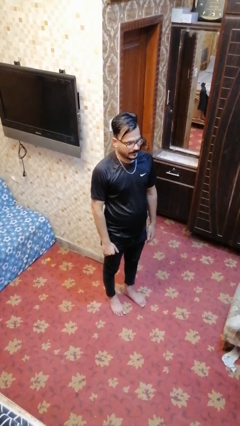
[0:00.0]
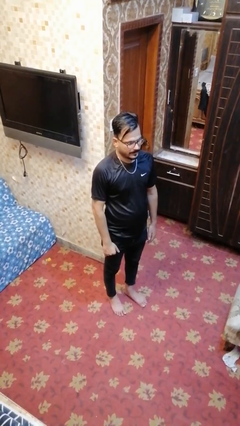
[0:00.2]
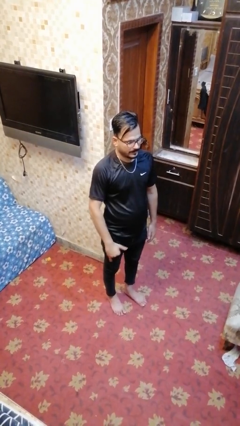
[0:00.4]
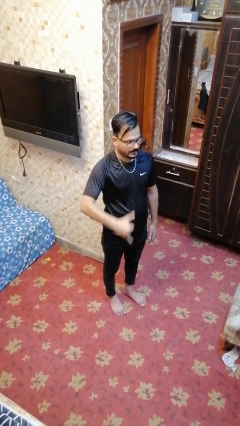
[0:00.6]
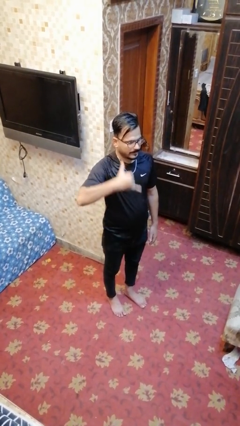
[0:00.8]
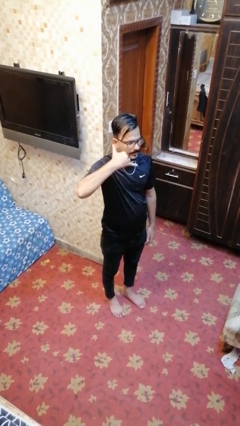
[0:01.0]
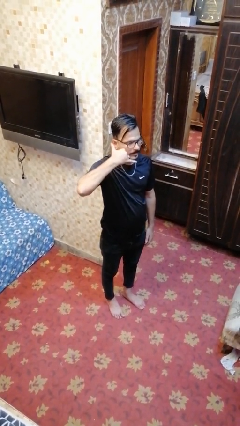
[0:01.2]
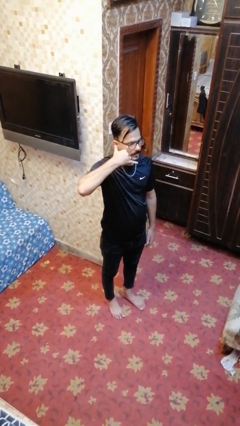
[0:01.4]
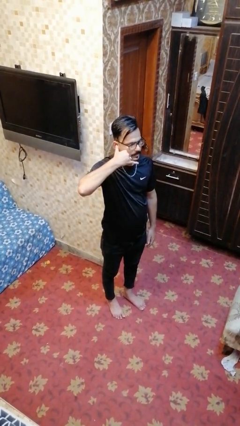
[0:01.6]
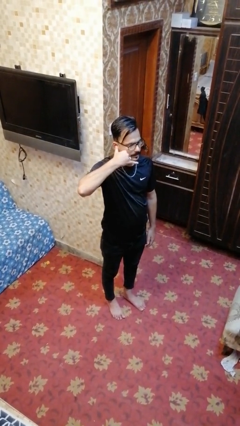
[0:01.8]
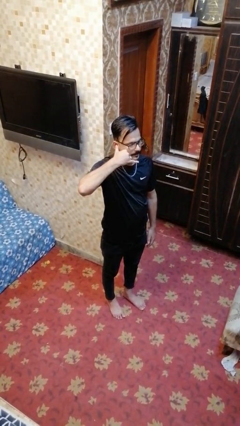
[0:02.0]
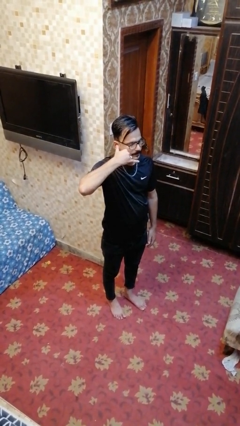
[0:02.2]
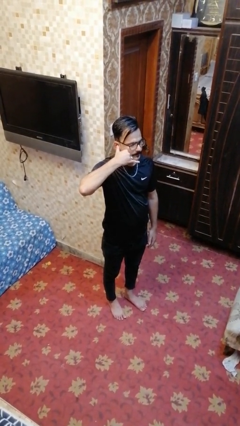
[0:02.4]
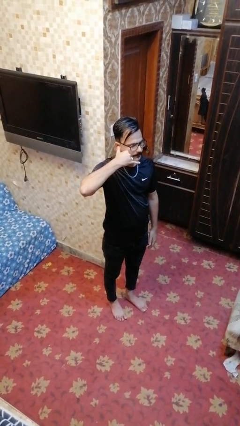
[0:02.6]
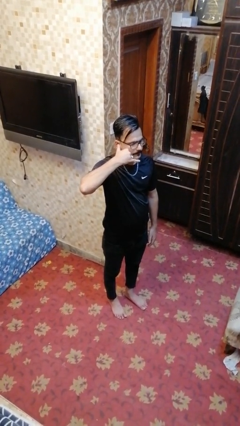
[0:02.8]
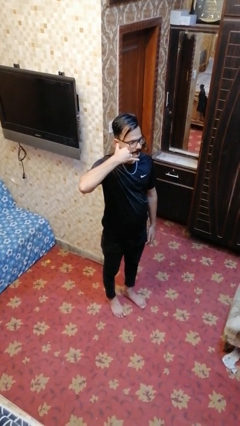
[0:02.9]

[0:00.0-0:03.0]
person gestures call me

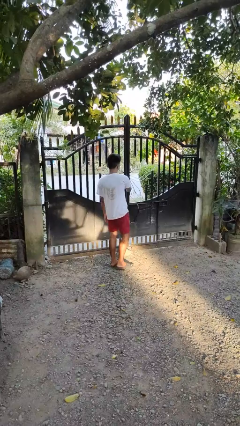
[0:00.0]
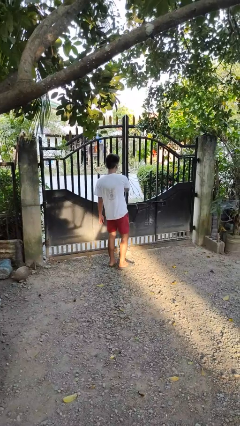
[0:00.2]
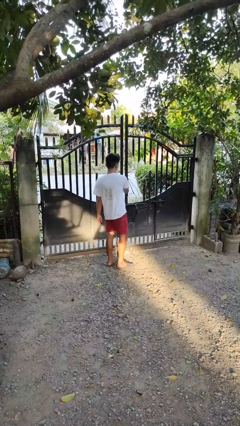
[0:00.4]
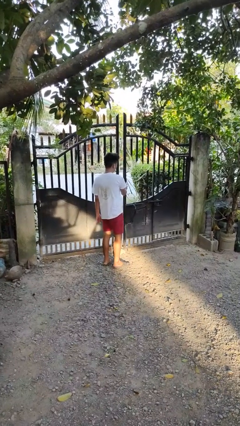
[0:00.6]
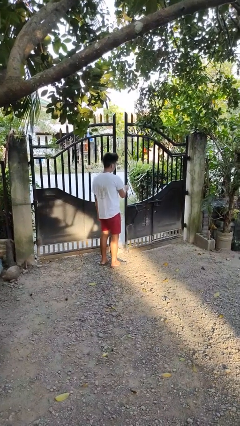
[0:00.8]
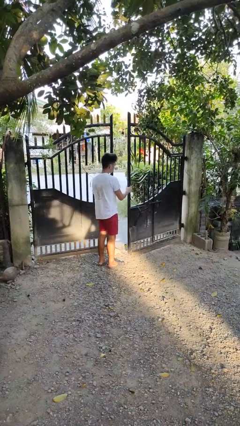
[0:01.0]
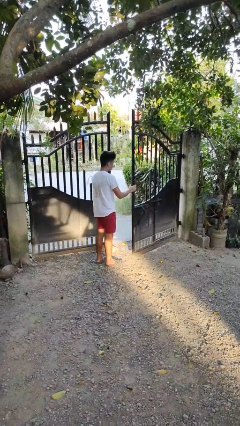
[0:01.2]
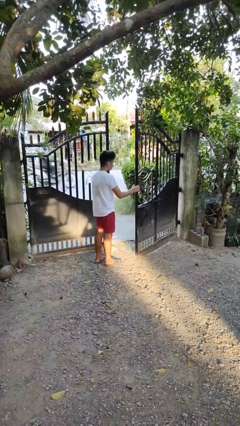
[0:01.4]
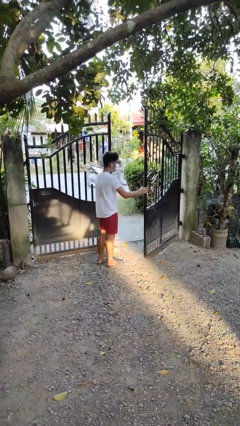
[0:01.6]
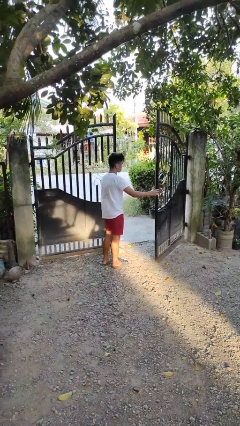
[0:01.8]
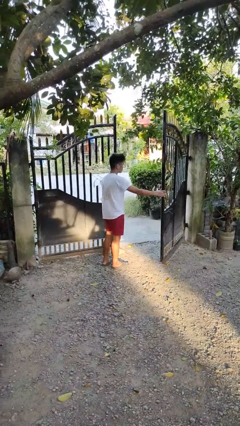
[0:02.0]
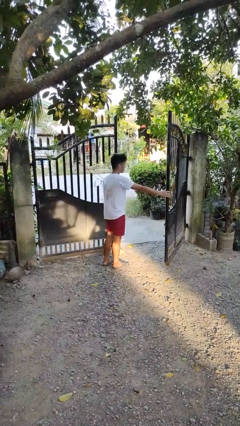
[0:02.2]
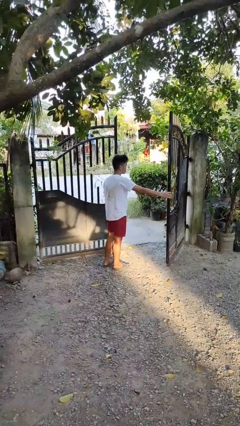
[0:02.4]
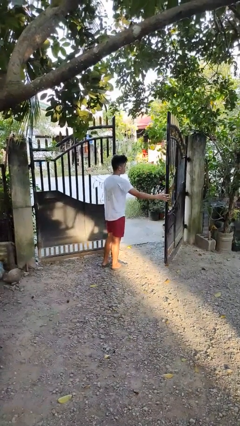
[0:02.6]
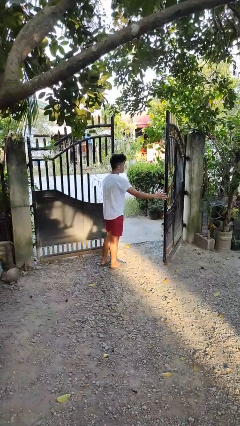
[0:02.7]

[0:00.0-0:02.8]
person opens gate

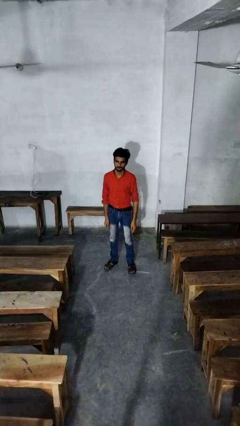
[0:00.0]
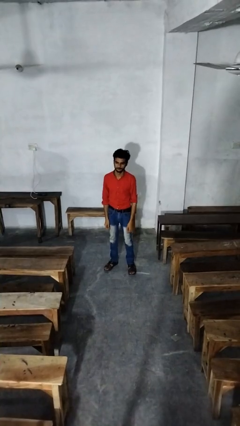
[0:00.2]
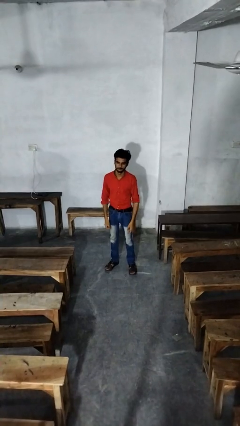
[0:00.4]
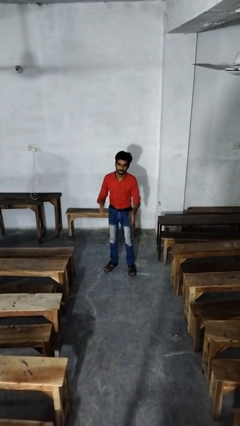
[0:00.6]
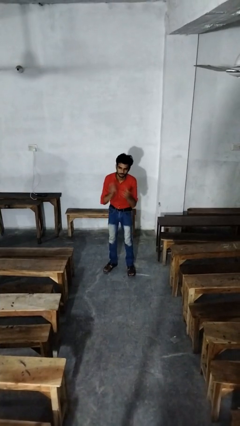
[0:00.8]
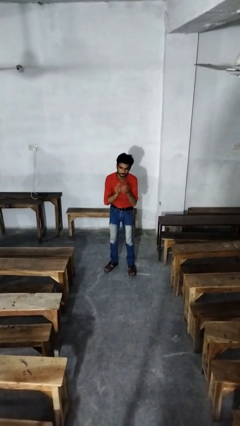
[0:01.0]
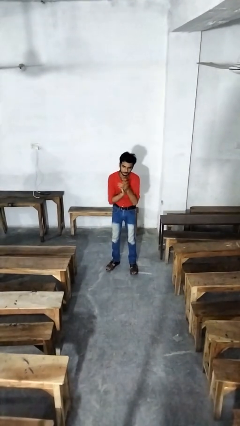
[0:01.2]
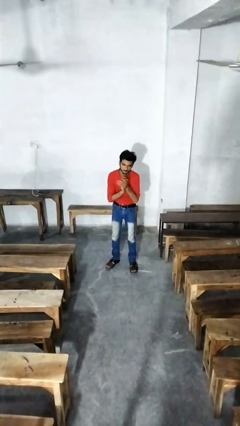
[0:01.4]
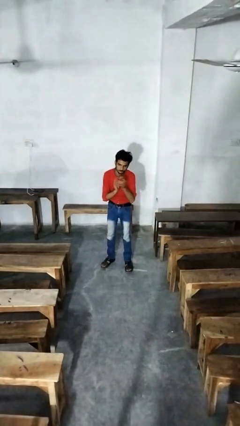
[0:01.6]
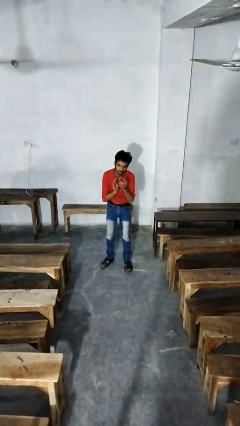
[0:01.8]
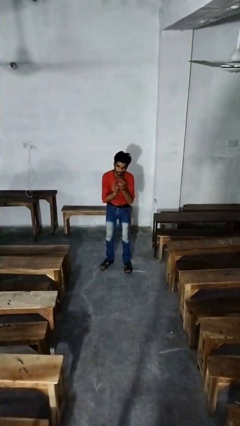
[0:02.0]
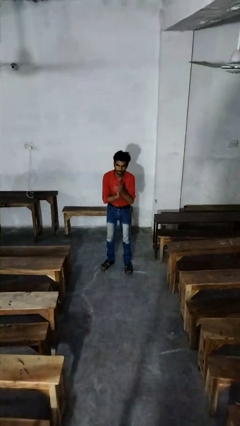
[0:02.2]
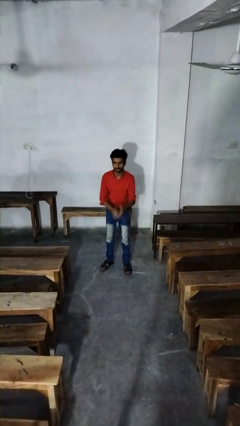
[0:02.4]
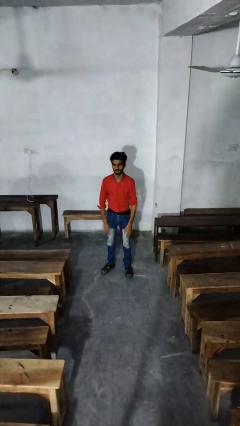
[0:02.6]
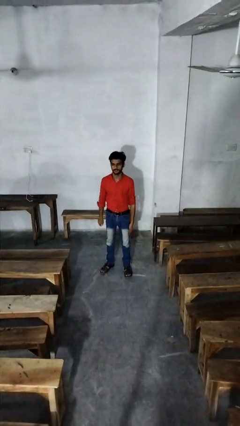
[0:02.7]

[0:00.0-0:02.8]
person claps hands

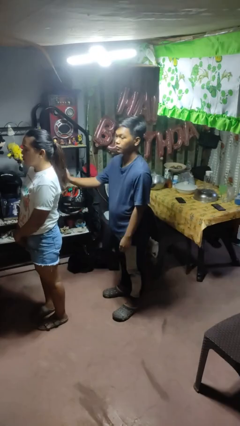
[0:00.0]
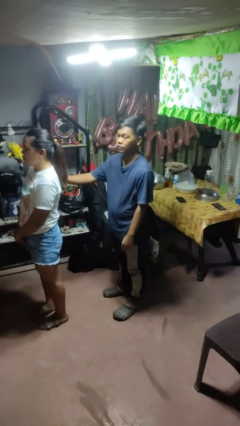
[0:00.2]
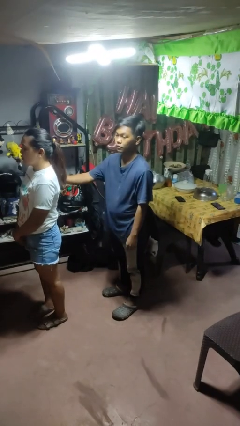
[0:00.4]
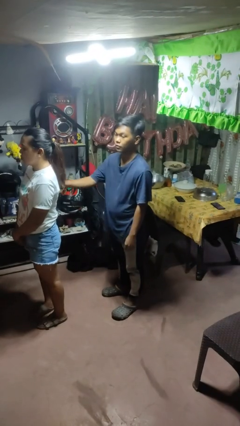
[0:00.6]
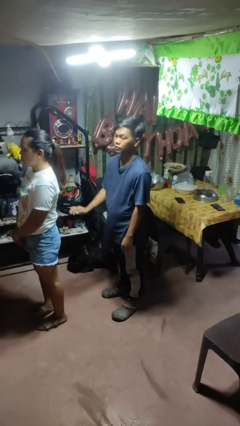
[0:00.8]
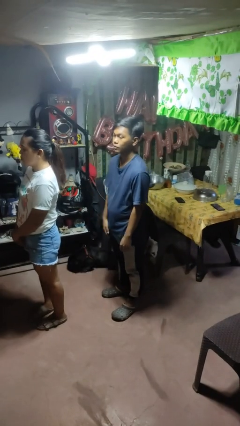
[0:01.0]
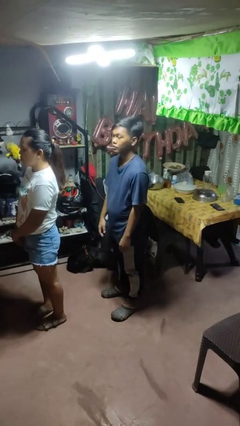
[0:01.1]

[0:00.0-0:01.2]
person touches back of person

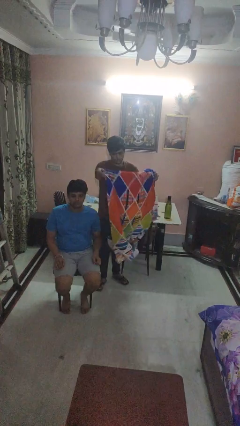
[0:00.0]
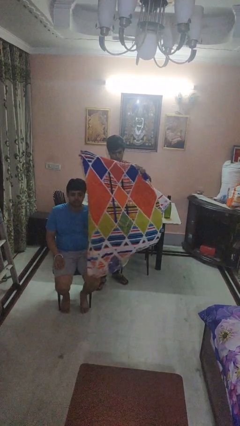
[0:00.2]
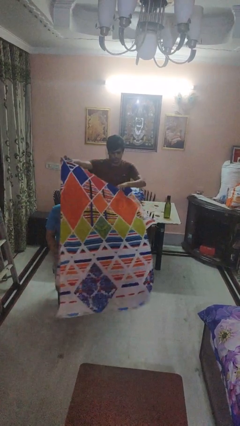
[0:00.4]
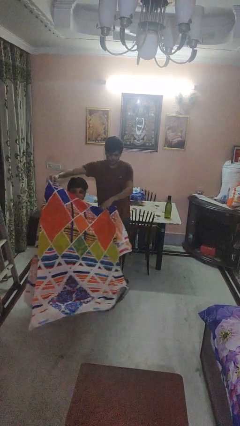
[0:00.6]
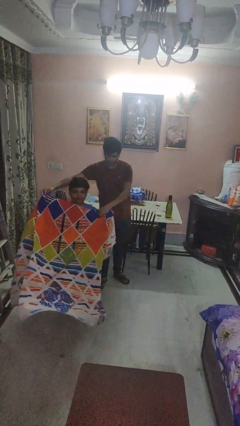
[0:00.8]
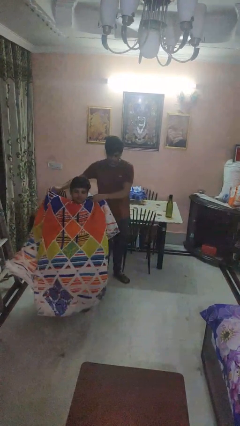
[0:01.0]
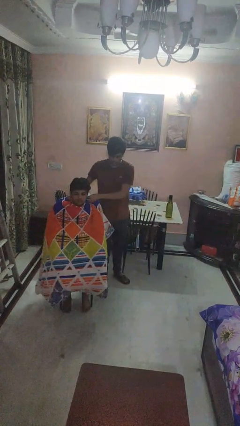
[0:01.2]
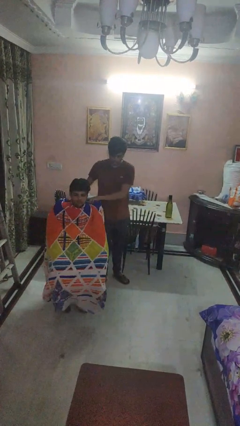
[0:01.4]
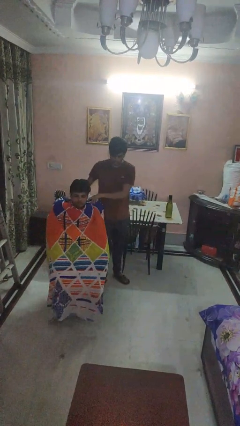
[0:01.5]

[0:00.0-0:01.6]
person covers friend with blanket

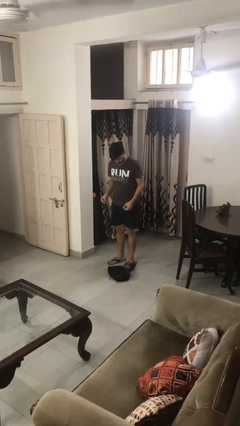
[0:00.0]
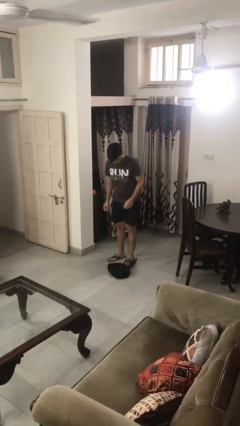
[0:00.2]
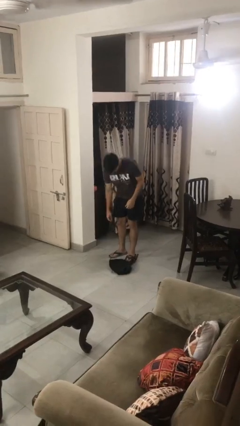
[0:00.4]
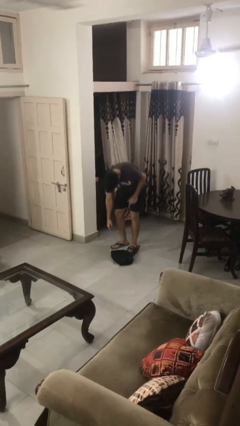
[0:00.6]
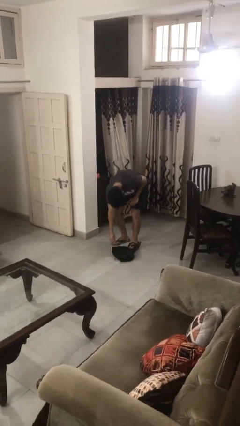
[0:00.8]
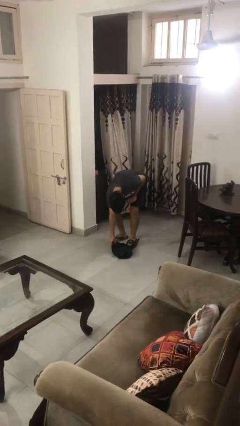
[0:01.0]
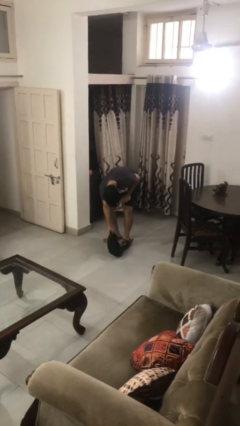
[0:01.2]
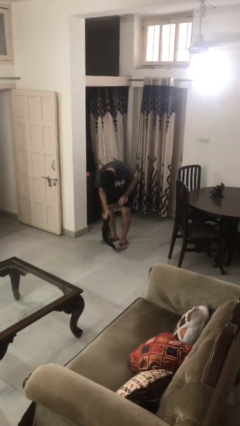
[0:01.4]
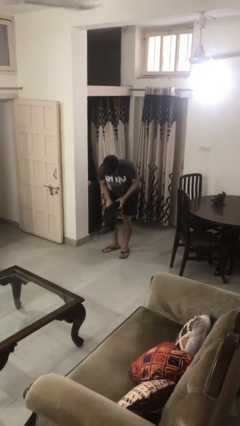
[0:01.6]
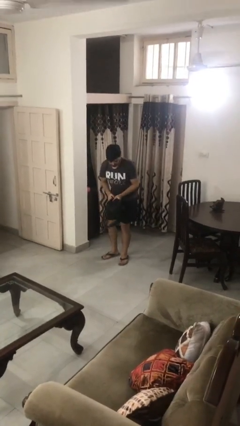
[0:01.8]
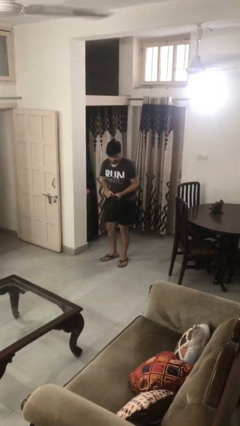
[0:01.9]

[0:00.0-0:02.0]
person picks up object from floor

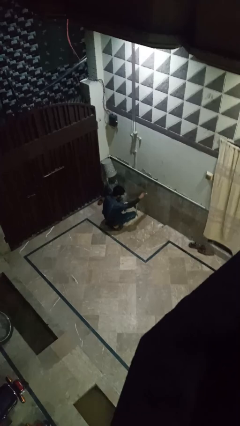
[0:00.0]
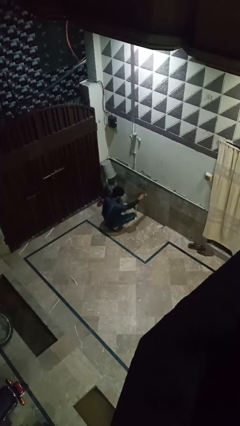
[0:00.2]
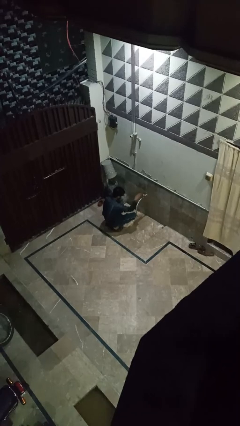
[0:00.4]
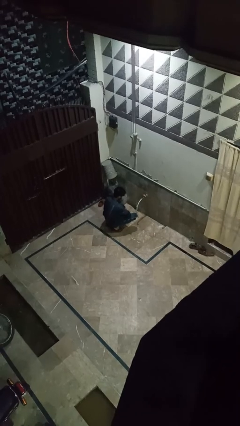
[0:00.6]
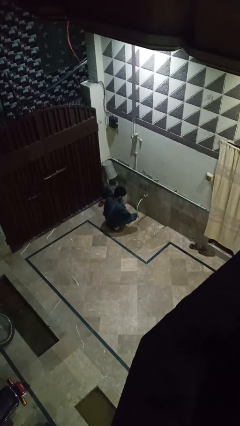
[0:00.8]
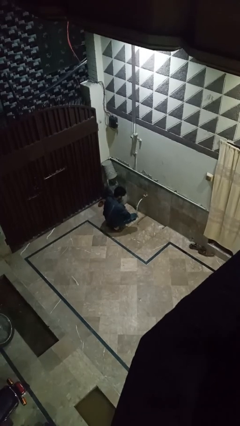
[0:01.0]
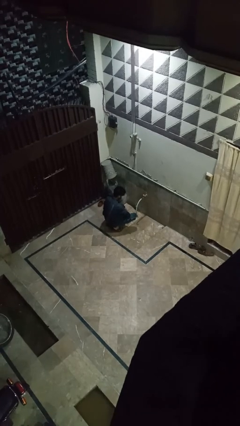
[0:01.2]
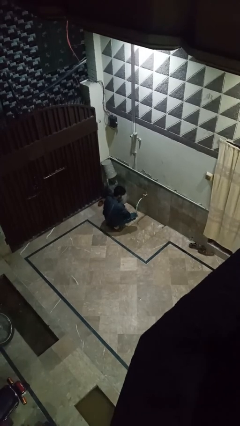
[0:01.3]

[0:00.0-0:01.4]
person turns off faucet

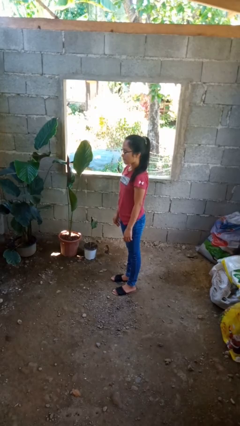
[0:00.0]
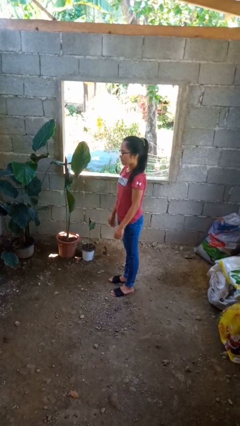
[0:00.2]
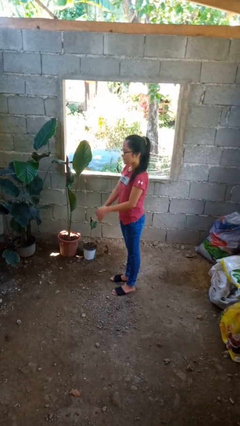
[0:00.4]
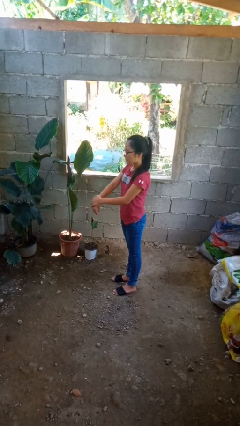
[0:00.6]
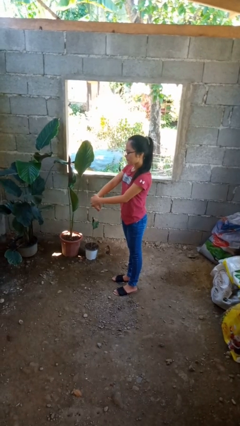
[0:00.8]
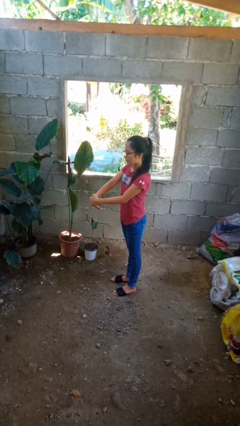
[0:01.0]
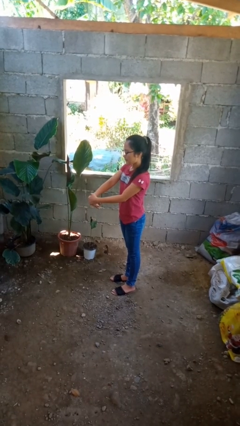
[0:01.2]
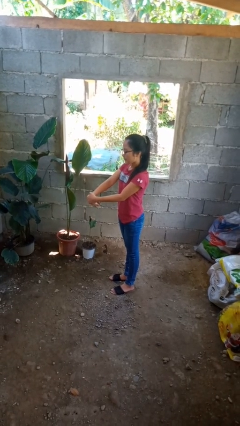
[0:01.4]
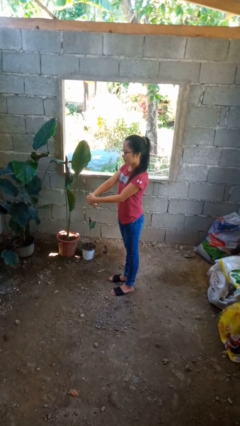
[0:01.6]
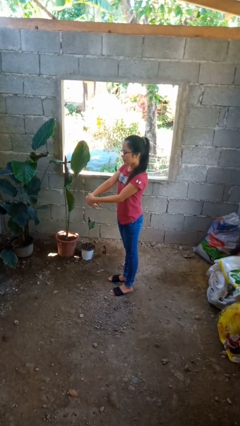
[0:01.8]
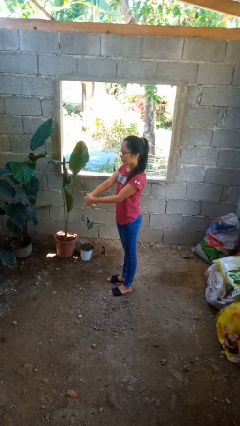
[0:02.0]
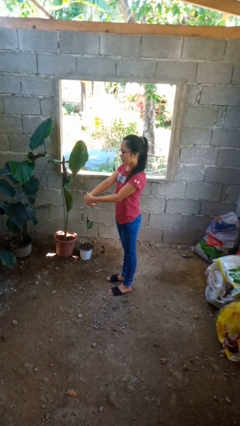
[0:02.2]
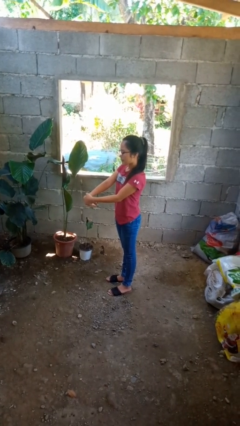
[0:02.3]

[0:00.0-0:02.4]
person cracks knuckles
